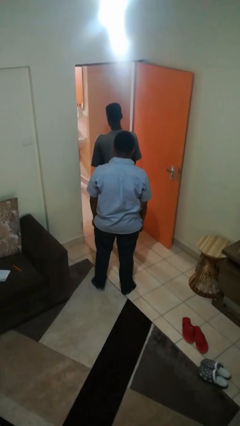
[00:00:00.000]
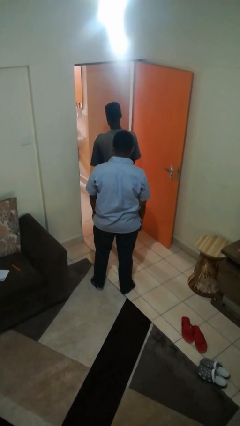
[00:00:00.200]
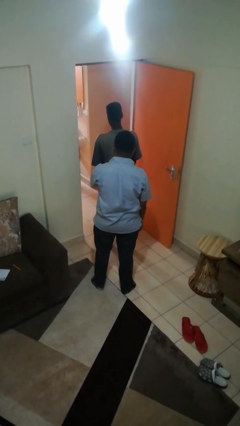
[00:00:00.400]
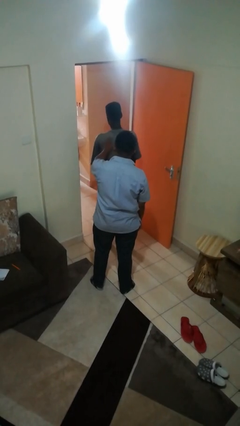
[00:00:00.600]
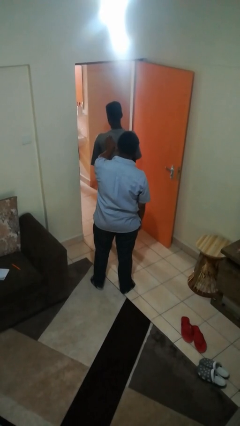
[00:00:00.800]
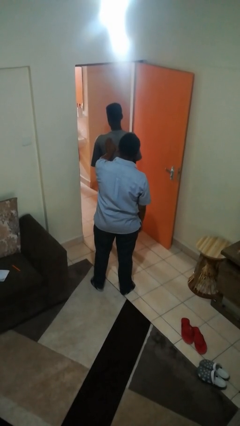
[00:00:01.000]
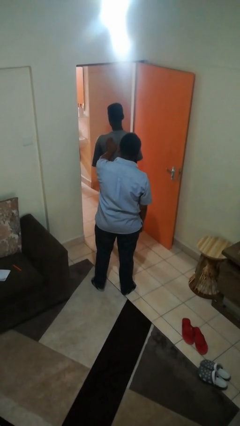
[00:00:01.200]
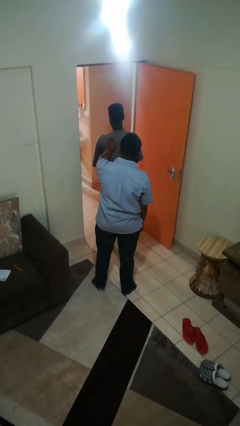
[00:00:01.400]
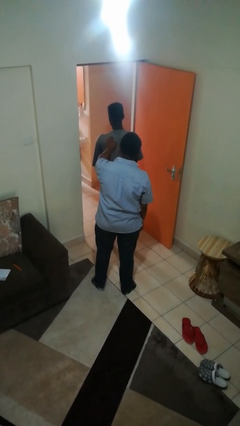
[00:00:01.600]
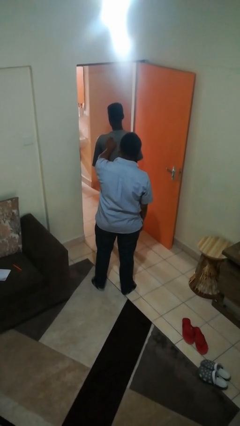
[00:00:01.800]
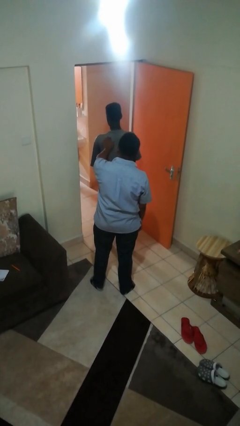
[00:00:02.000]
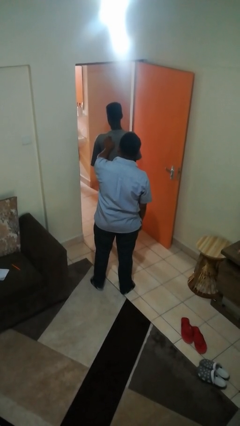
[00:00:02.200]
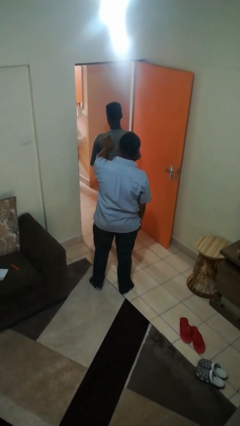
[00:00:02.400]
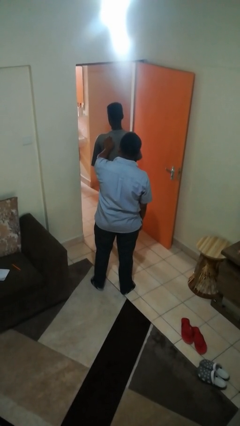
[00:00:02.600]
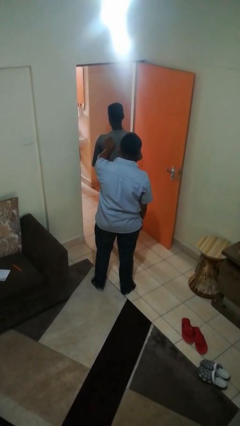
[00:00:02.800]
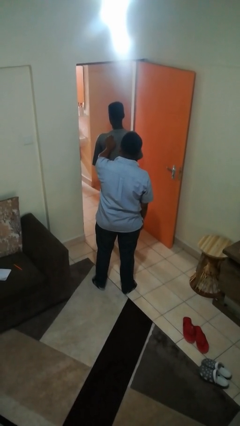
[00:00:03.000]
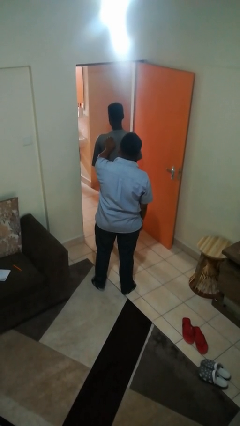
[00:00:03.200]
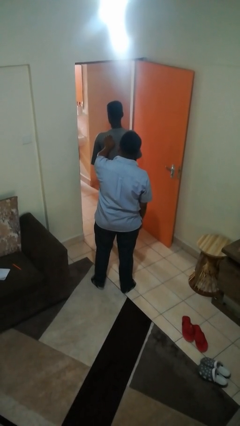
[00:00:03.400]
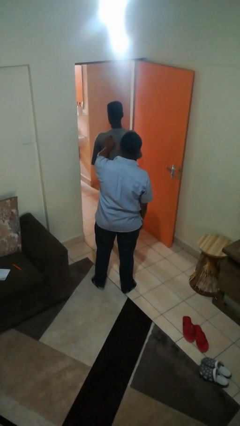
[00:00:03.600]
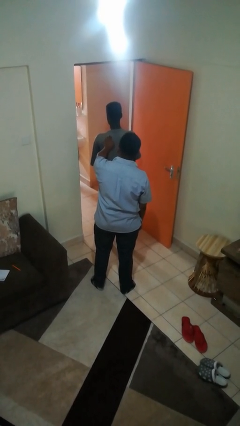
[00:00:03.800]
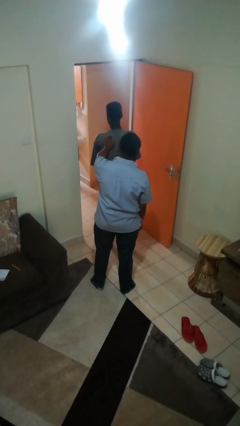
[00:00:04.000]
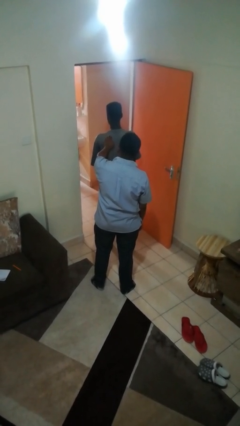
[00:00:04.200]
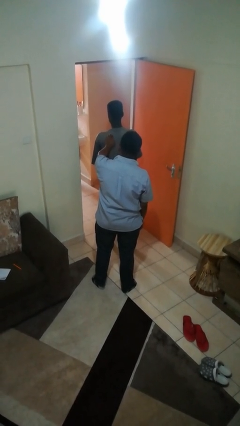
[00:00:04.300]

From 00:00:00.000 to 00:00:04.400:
person touches back of person

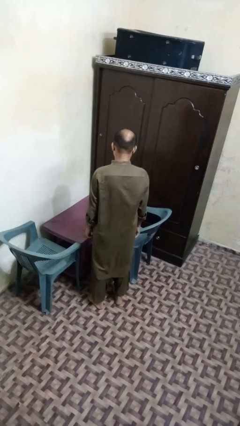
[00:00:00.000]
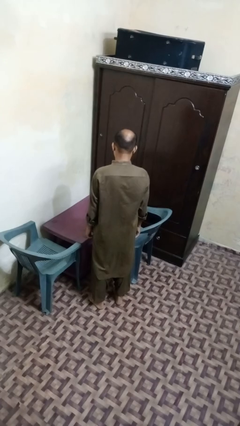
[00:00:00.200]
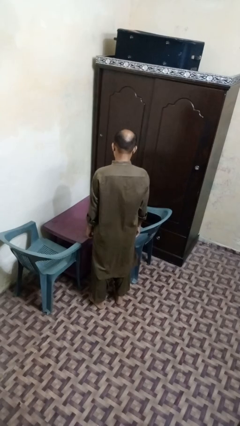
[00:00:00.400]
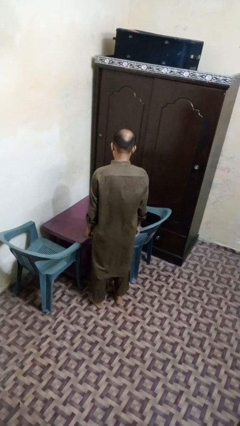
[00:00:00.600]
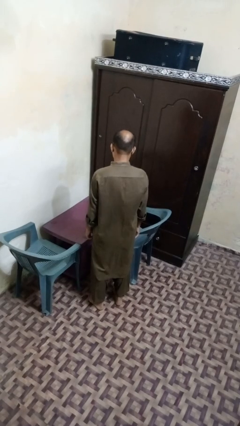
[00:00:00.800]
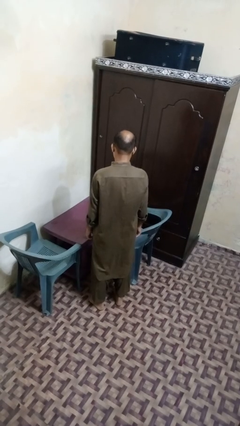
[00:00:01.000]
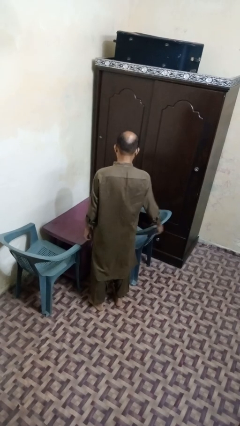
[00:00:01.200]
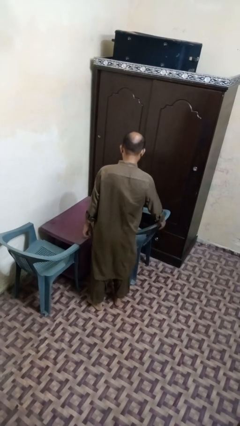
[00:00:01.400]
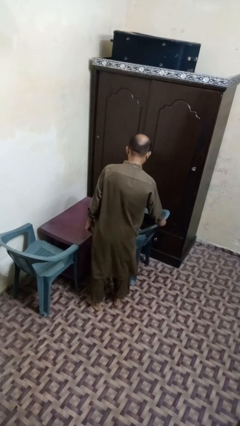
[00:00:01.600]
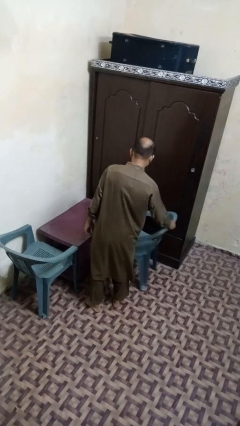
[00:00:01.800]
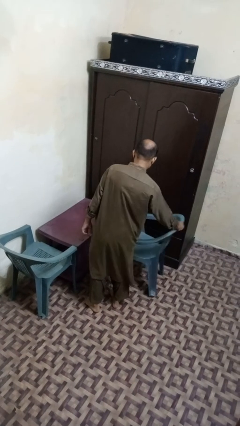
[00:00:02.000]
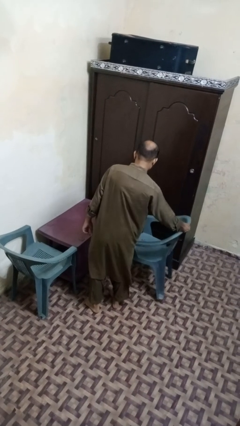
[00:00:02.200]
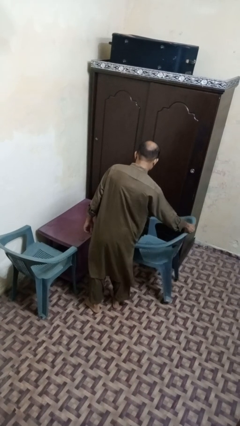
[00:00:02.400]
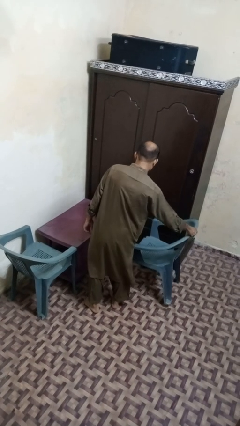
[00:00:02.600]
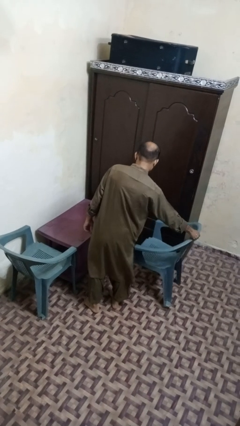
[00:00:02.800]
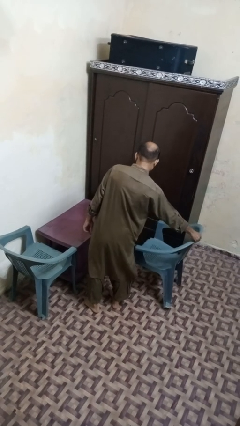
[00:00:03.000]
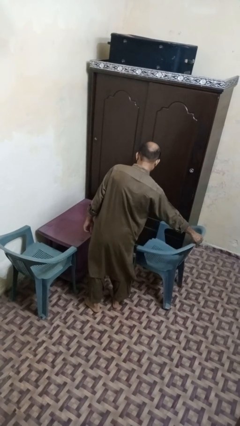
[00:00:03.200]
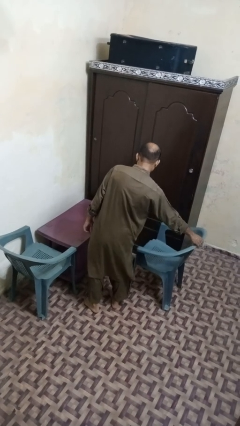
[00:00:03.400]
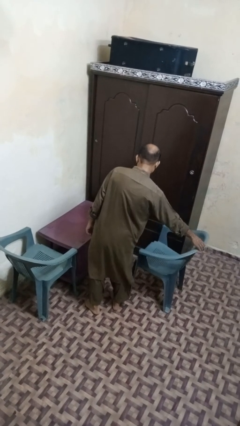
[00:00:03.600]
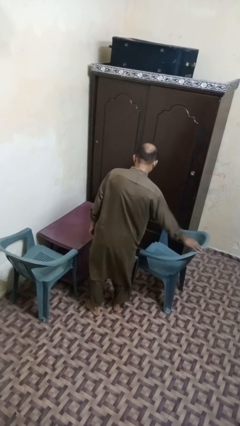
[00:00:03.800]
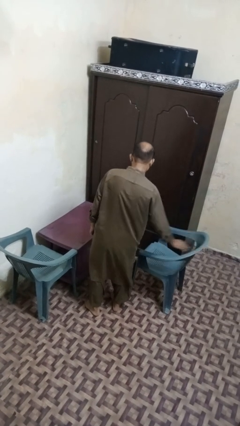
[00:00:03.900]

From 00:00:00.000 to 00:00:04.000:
person pulls out chair

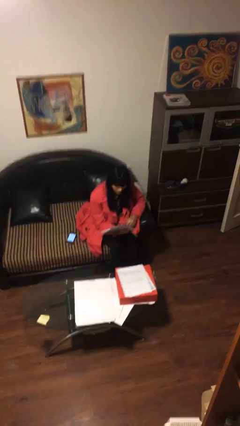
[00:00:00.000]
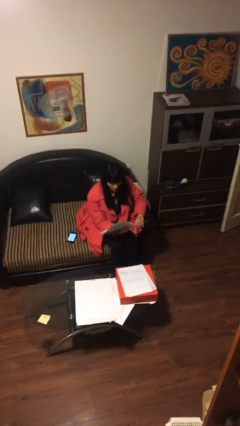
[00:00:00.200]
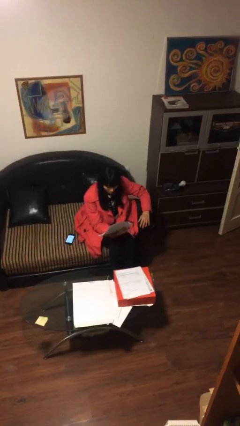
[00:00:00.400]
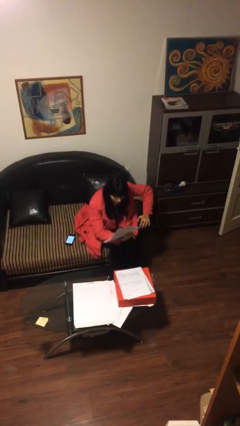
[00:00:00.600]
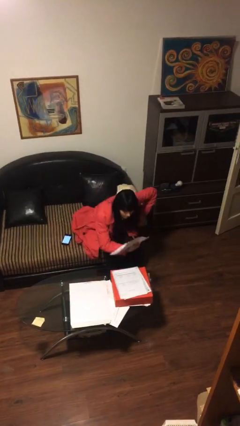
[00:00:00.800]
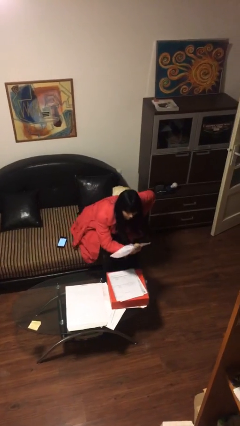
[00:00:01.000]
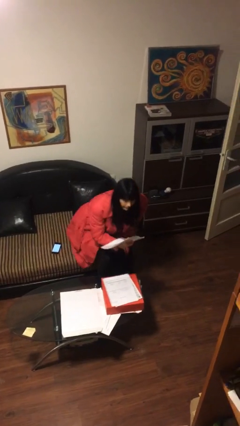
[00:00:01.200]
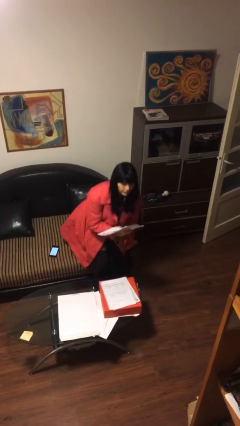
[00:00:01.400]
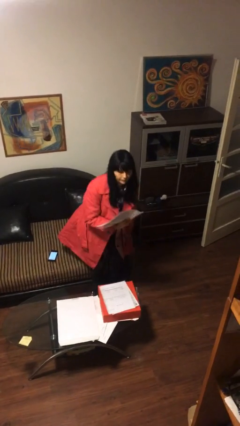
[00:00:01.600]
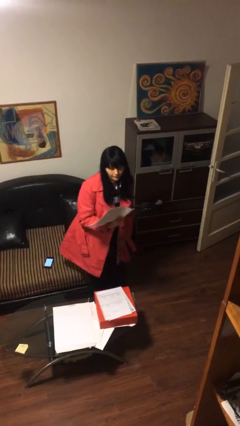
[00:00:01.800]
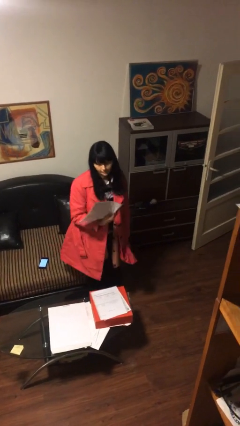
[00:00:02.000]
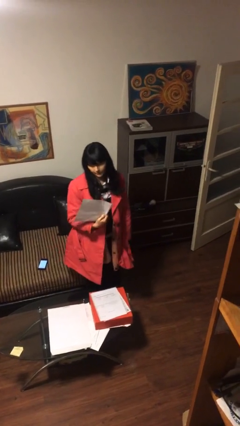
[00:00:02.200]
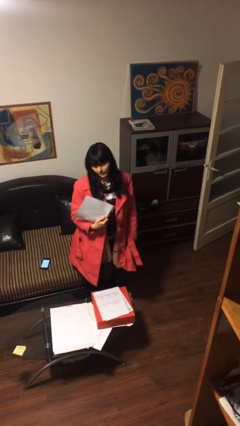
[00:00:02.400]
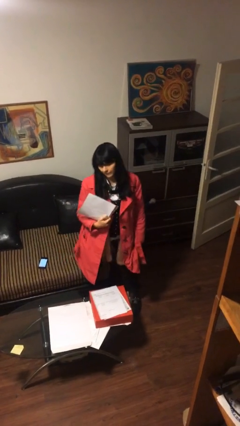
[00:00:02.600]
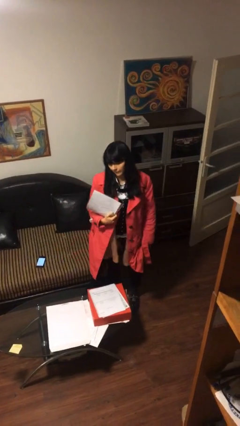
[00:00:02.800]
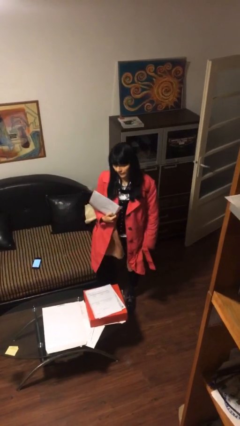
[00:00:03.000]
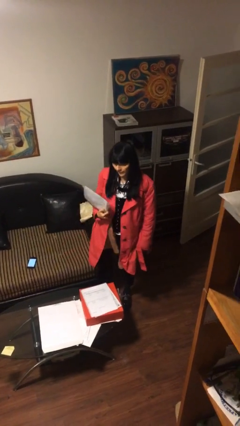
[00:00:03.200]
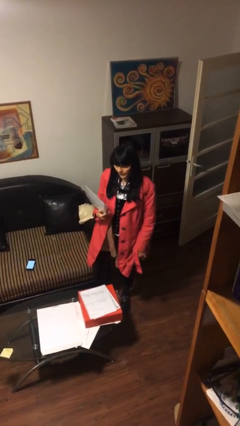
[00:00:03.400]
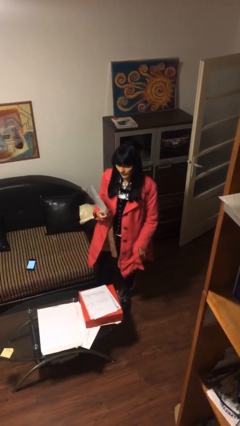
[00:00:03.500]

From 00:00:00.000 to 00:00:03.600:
person stands up

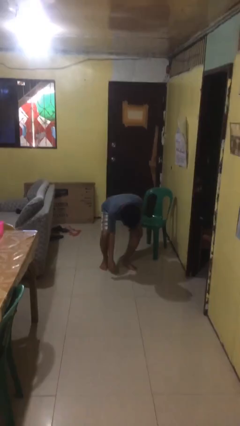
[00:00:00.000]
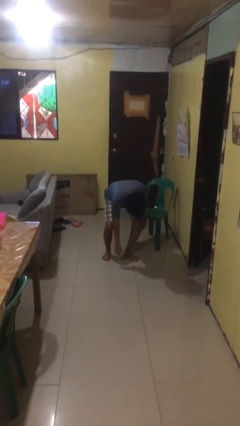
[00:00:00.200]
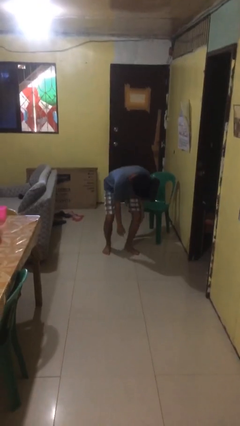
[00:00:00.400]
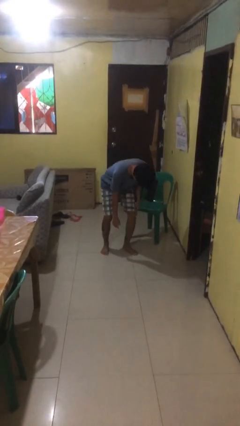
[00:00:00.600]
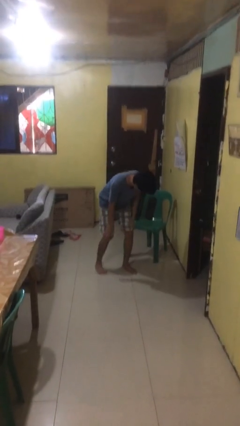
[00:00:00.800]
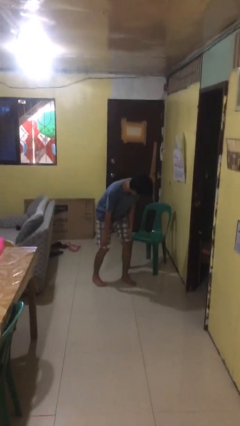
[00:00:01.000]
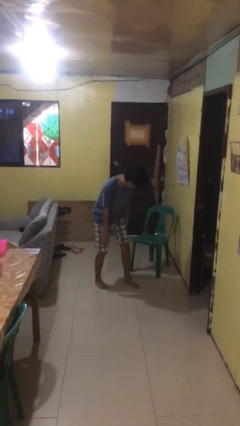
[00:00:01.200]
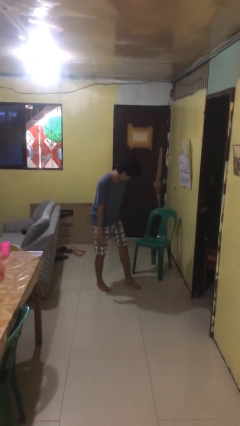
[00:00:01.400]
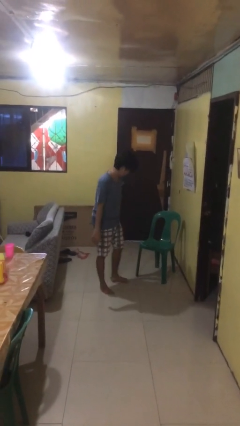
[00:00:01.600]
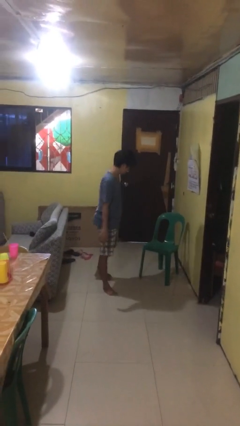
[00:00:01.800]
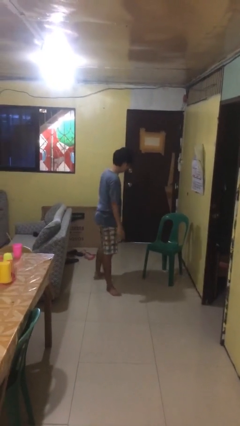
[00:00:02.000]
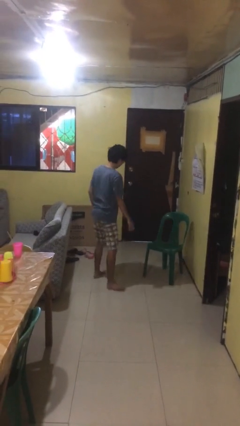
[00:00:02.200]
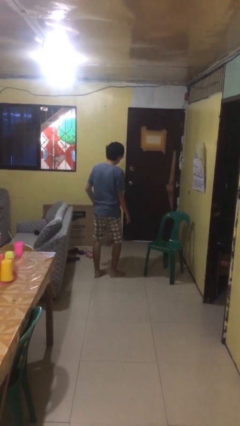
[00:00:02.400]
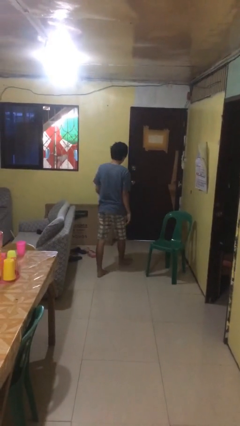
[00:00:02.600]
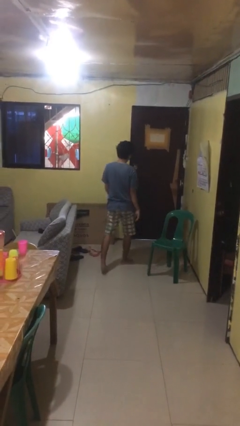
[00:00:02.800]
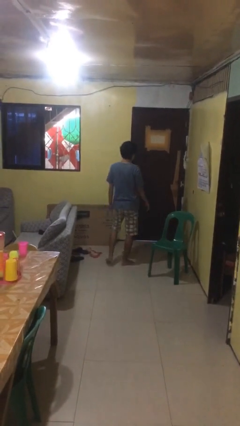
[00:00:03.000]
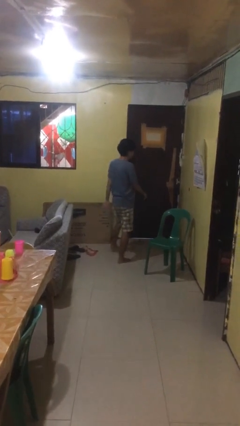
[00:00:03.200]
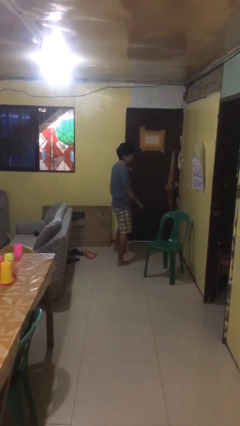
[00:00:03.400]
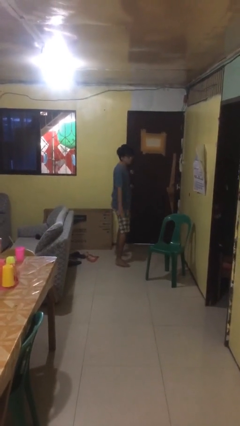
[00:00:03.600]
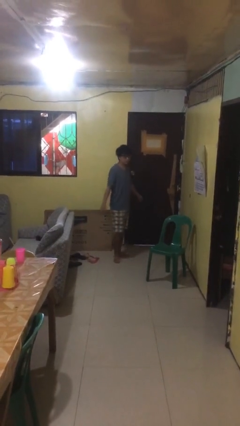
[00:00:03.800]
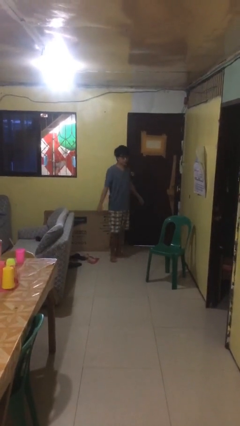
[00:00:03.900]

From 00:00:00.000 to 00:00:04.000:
person stands up from floor

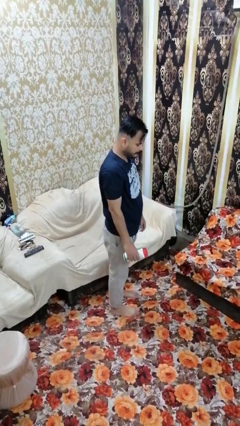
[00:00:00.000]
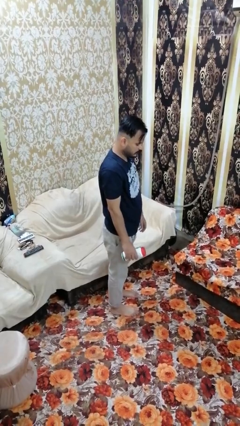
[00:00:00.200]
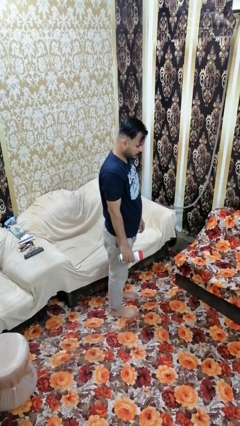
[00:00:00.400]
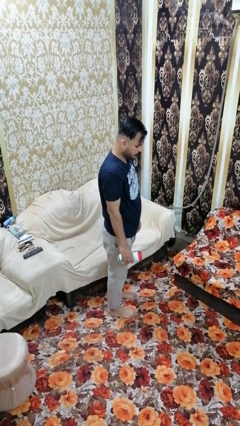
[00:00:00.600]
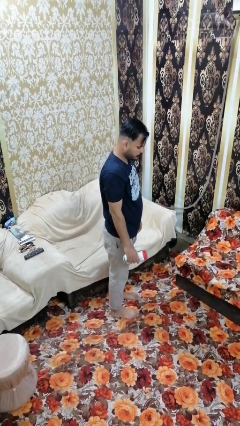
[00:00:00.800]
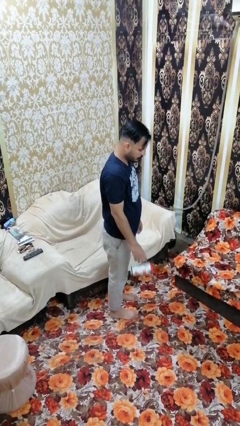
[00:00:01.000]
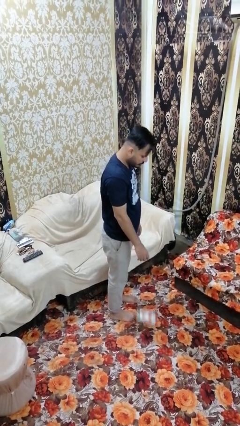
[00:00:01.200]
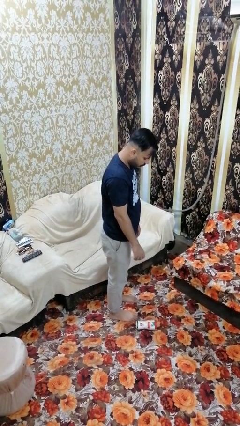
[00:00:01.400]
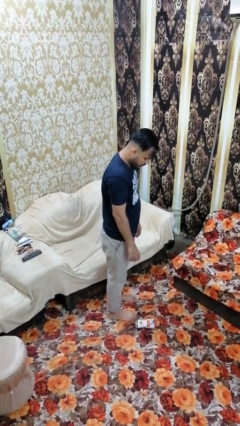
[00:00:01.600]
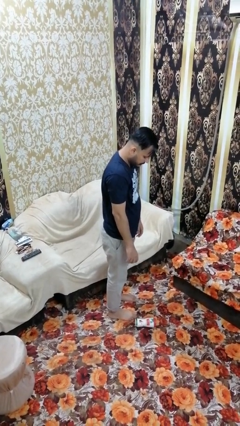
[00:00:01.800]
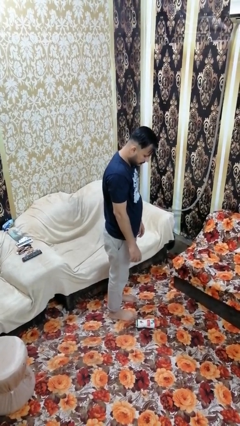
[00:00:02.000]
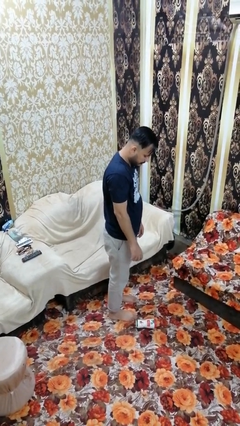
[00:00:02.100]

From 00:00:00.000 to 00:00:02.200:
person drops object
